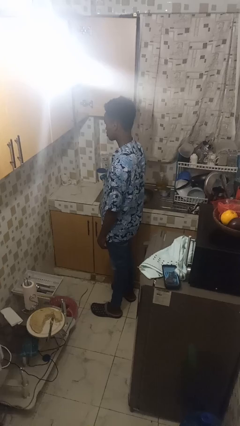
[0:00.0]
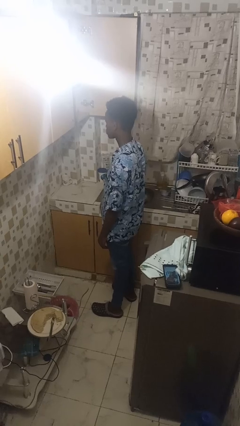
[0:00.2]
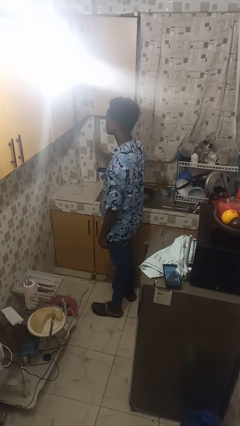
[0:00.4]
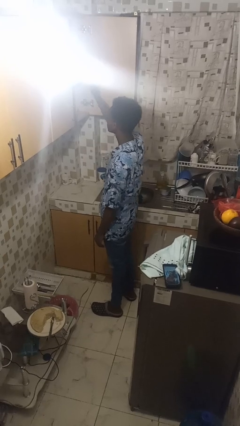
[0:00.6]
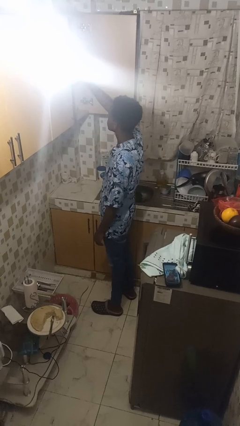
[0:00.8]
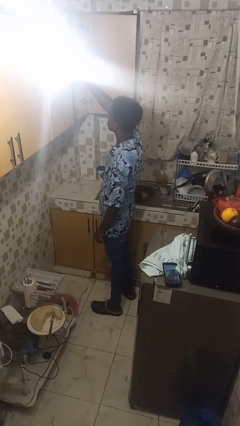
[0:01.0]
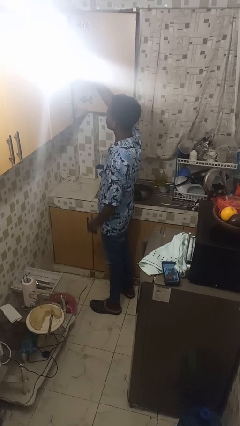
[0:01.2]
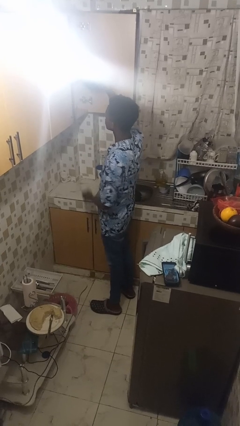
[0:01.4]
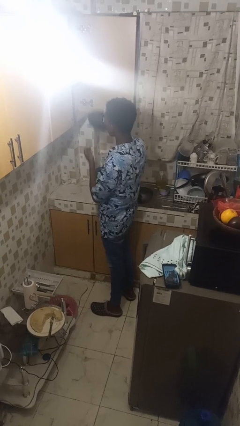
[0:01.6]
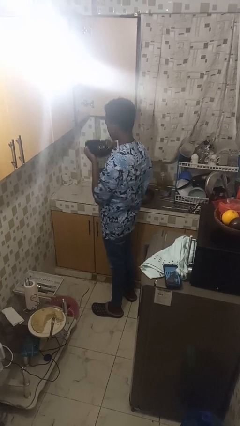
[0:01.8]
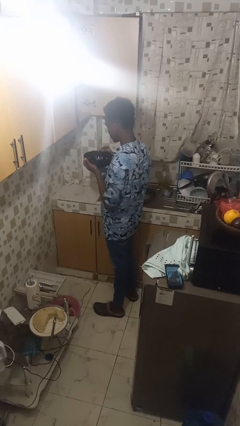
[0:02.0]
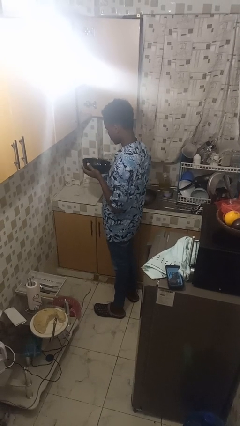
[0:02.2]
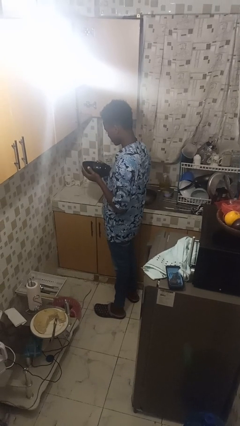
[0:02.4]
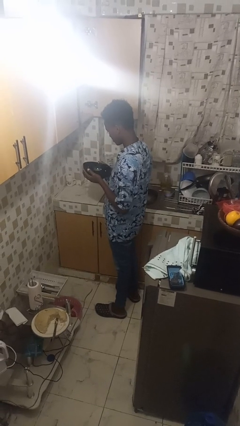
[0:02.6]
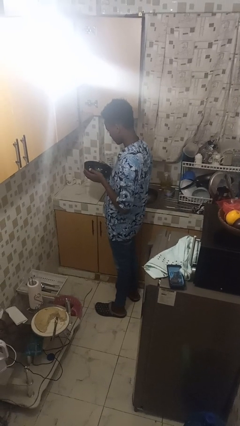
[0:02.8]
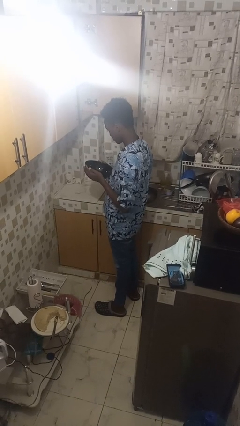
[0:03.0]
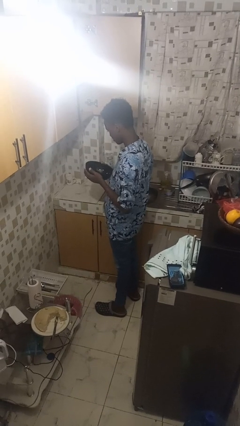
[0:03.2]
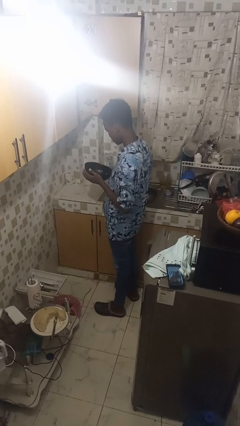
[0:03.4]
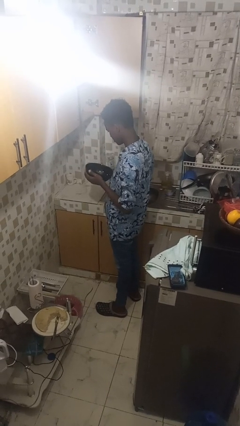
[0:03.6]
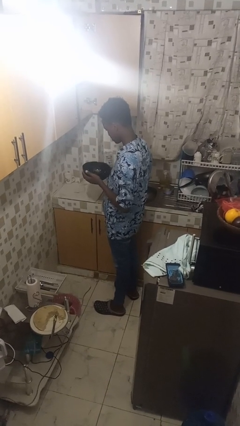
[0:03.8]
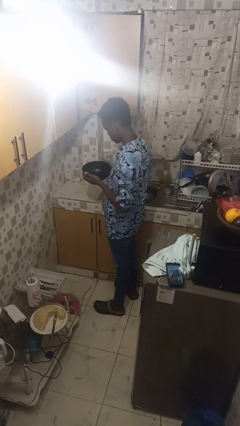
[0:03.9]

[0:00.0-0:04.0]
person picks up object from cabinet

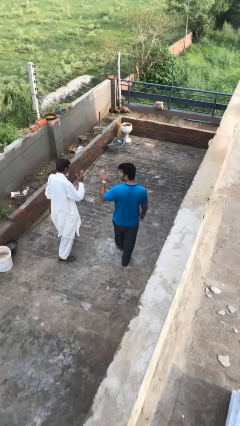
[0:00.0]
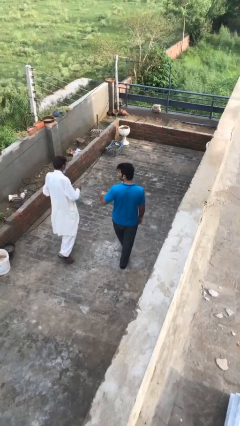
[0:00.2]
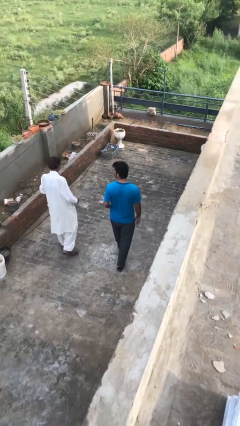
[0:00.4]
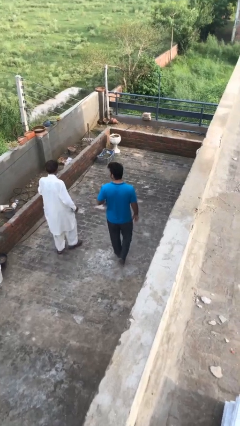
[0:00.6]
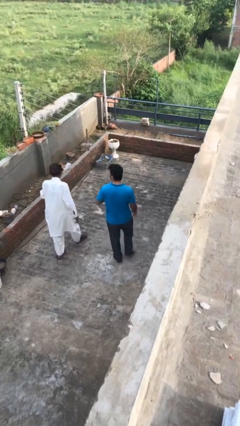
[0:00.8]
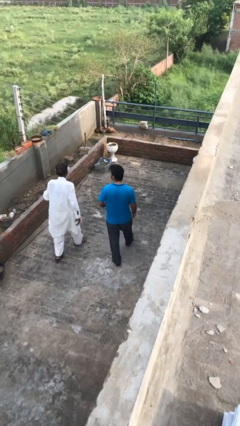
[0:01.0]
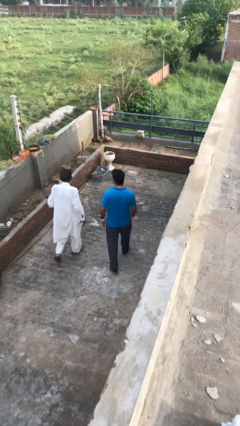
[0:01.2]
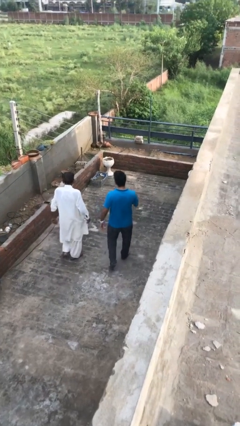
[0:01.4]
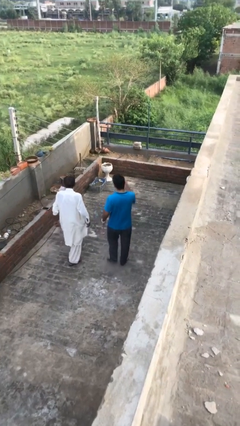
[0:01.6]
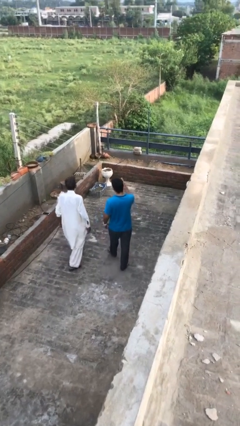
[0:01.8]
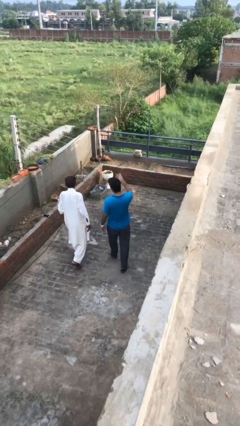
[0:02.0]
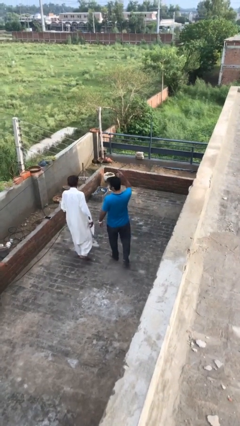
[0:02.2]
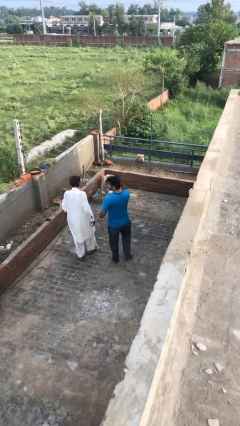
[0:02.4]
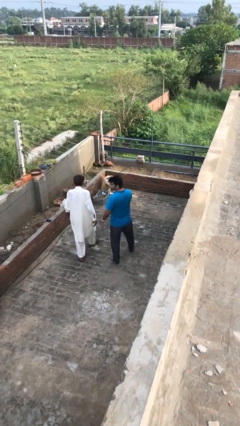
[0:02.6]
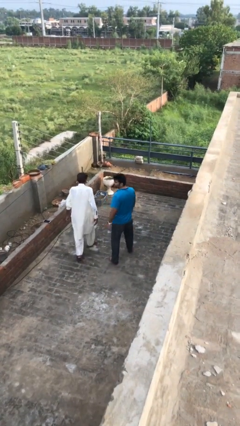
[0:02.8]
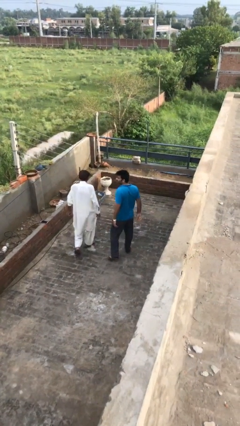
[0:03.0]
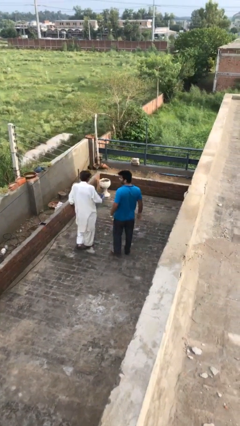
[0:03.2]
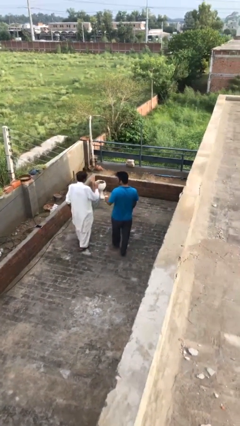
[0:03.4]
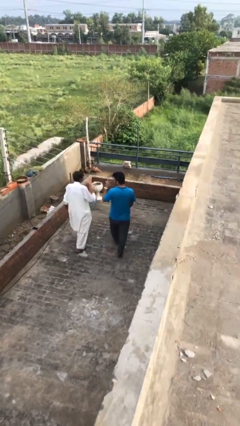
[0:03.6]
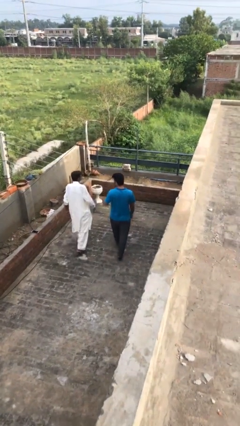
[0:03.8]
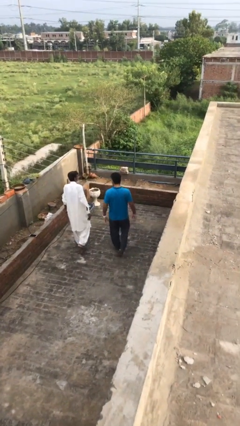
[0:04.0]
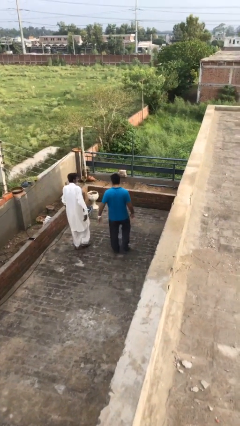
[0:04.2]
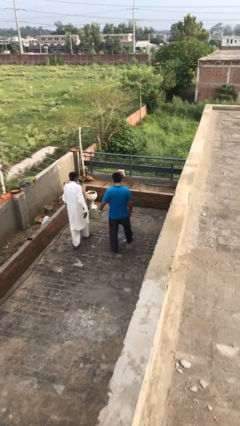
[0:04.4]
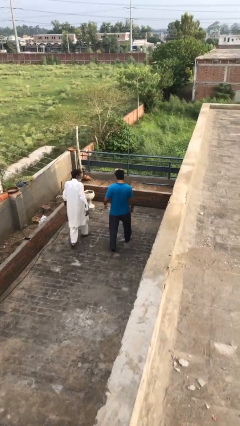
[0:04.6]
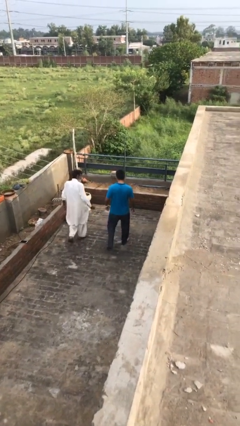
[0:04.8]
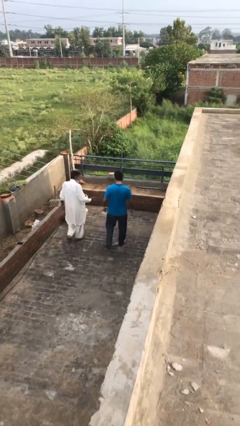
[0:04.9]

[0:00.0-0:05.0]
person talks to person

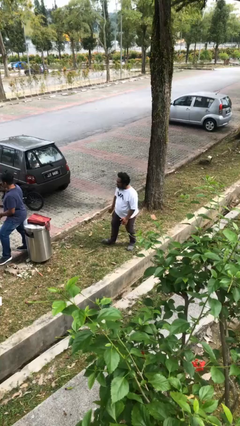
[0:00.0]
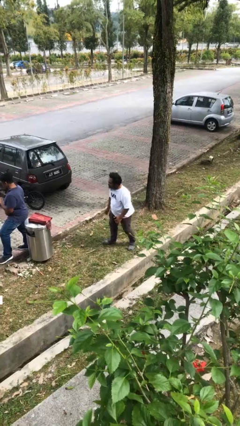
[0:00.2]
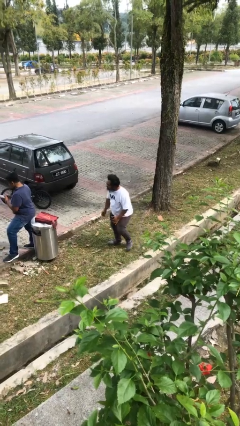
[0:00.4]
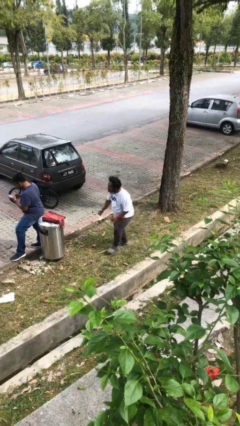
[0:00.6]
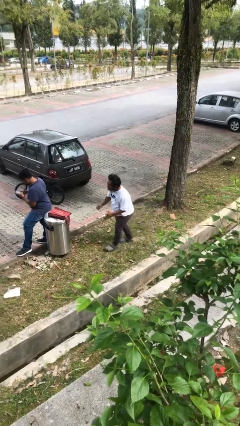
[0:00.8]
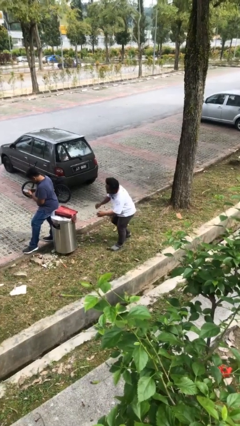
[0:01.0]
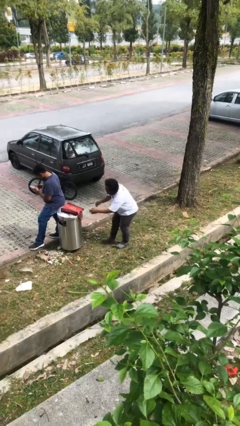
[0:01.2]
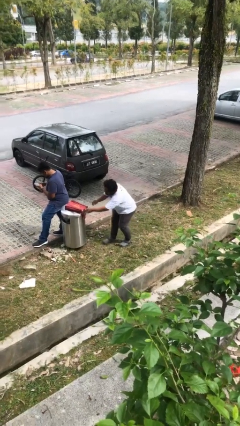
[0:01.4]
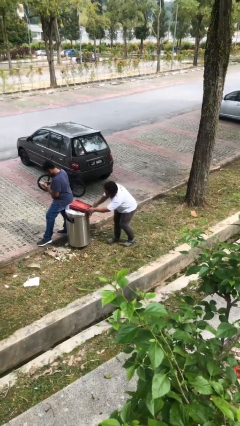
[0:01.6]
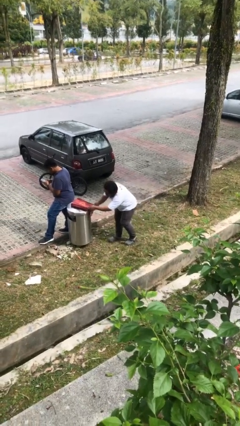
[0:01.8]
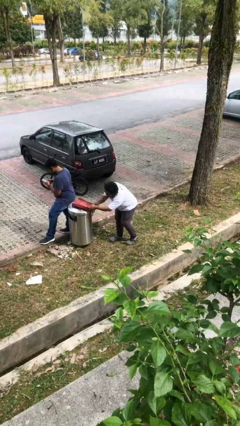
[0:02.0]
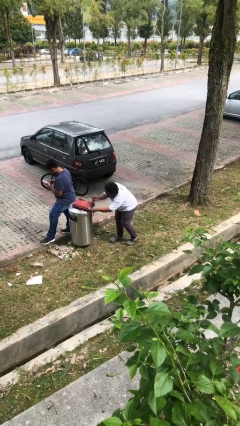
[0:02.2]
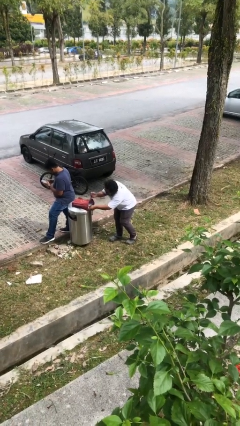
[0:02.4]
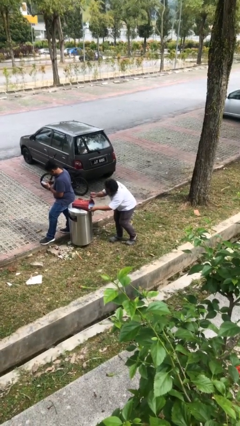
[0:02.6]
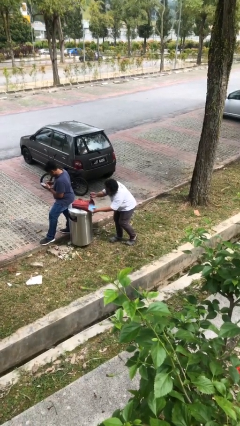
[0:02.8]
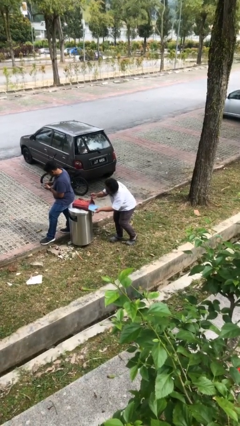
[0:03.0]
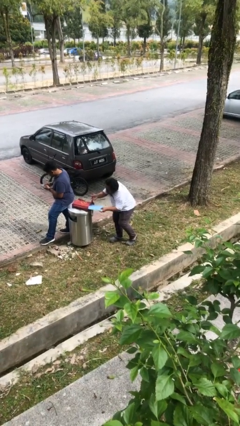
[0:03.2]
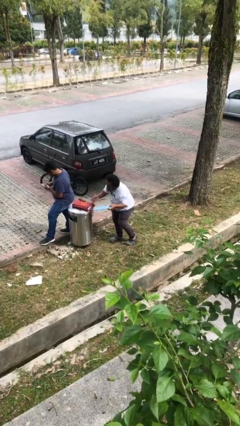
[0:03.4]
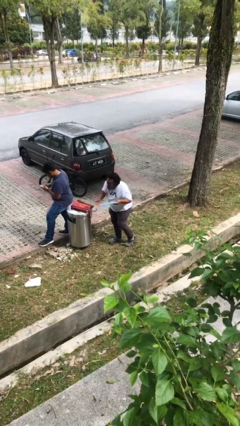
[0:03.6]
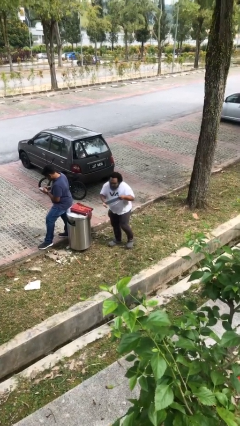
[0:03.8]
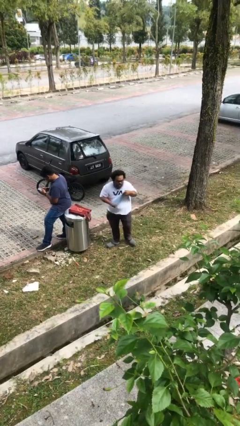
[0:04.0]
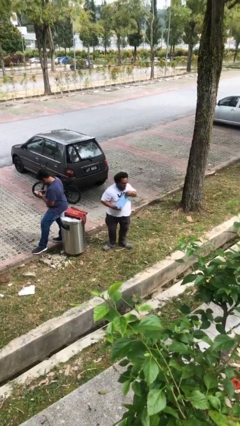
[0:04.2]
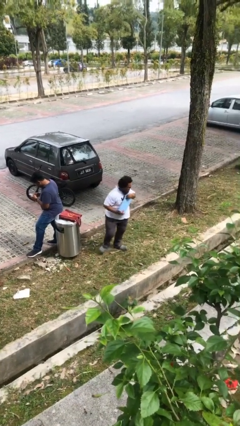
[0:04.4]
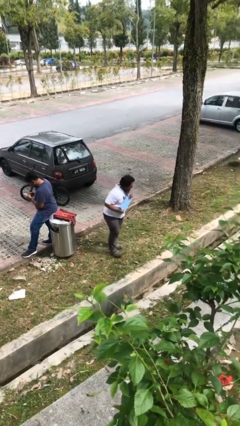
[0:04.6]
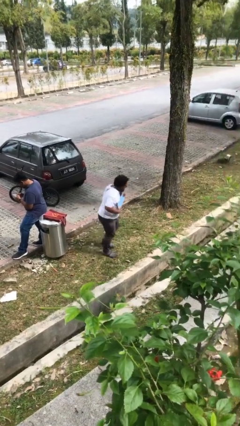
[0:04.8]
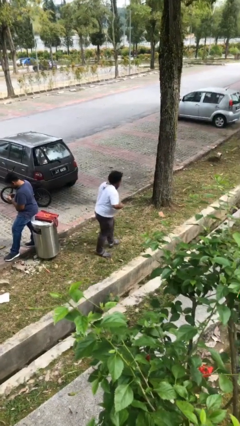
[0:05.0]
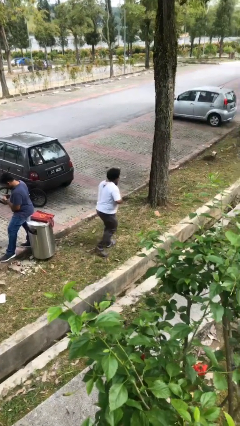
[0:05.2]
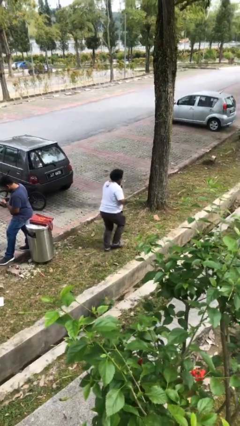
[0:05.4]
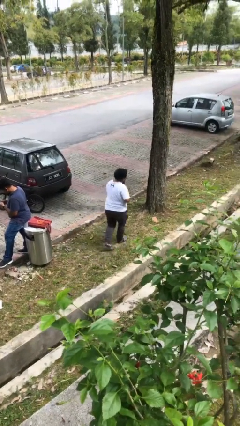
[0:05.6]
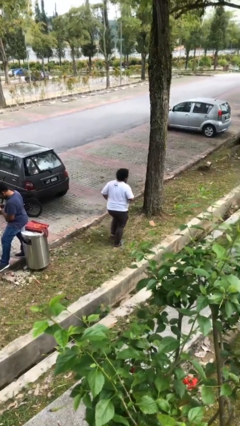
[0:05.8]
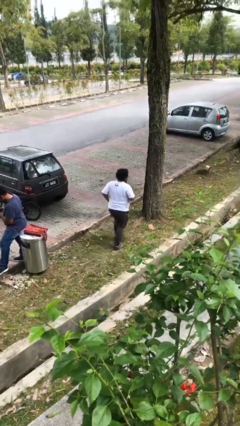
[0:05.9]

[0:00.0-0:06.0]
person steals object from person

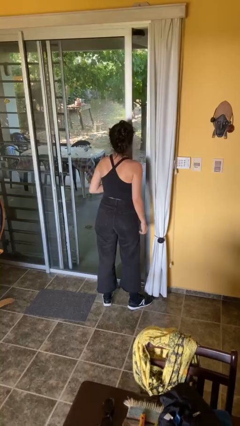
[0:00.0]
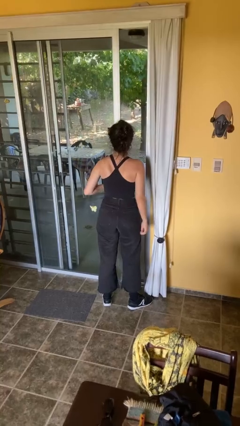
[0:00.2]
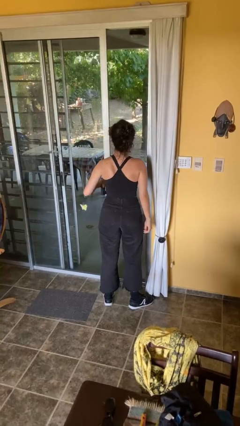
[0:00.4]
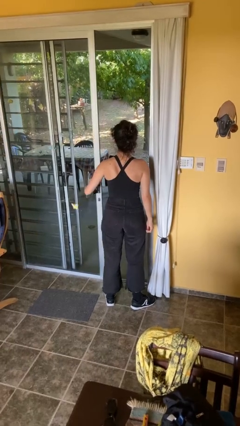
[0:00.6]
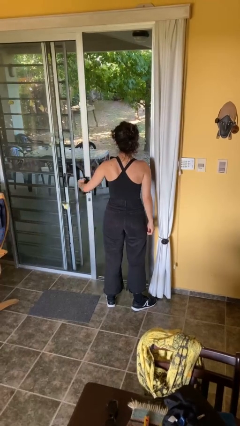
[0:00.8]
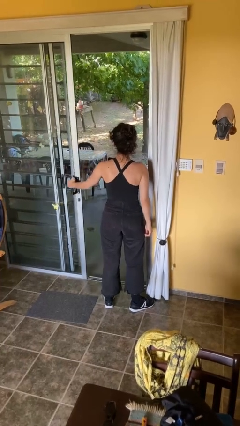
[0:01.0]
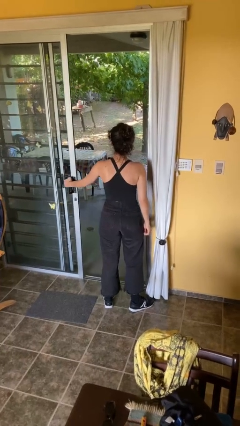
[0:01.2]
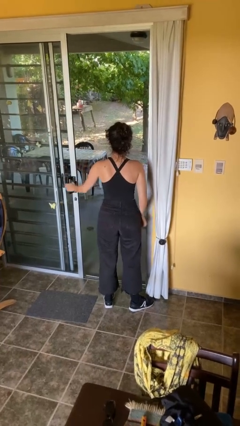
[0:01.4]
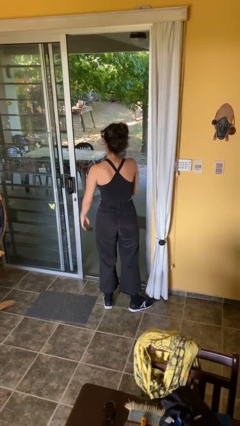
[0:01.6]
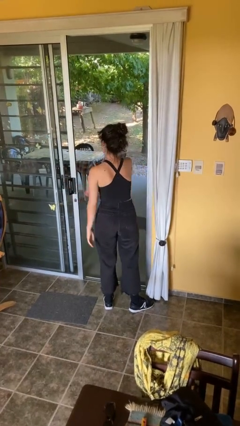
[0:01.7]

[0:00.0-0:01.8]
person opens facility door

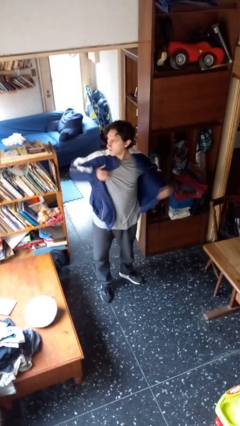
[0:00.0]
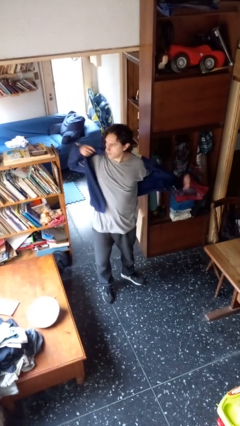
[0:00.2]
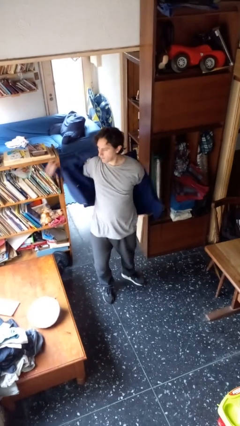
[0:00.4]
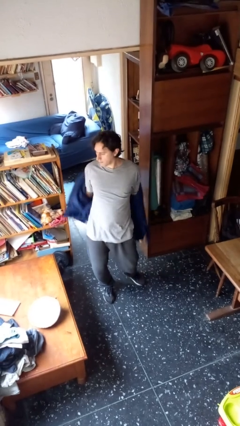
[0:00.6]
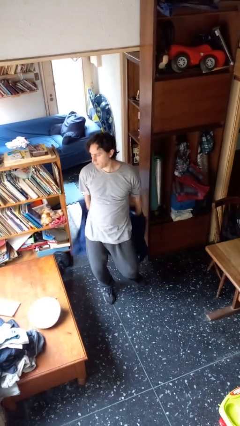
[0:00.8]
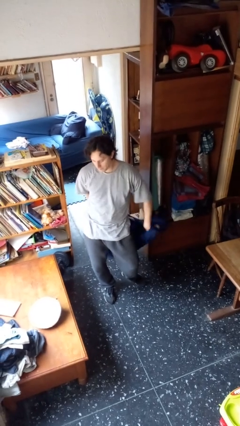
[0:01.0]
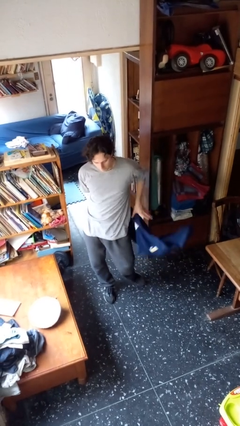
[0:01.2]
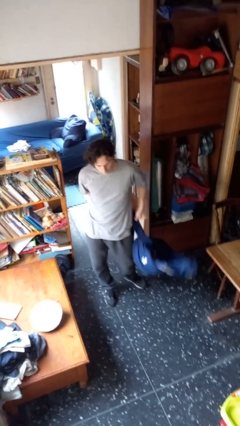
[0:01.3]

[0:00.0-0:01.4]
person takes off jacket
